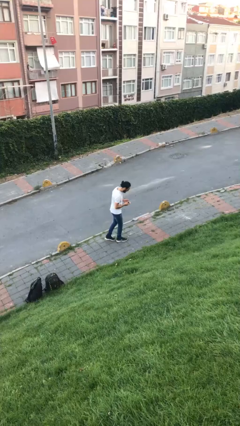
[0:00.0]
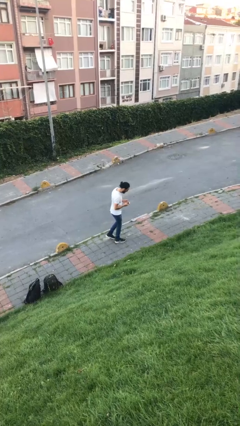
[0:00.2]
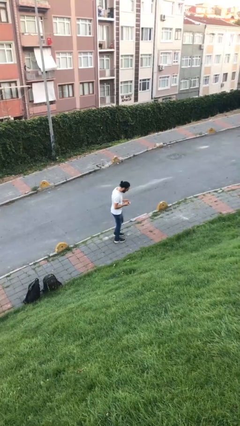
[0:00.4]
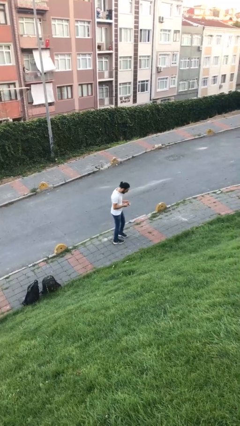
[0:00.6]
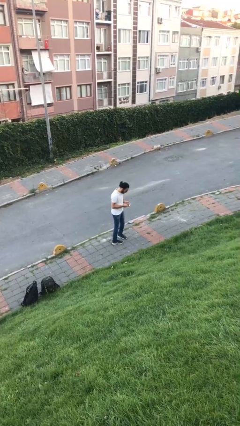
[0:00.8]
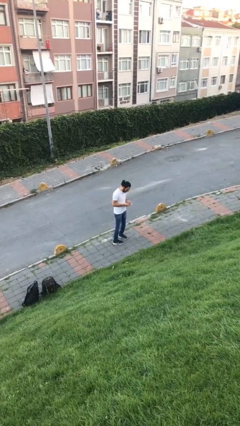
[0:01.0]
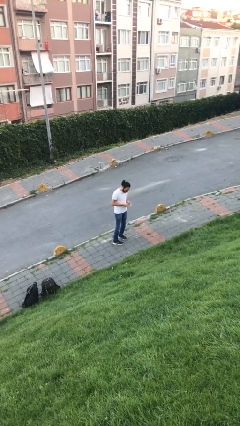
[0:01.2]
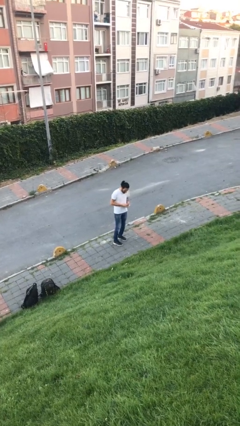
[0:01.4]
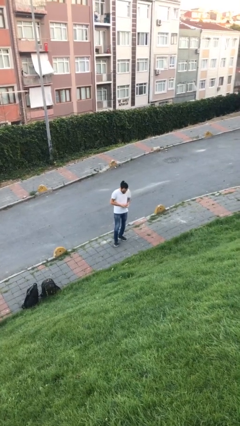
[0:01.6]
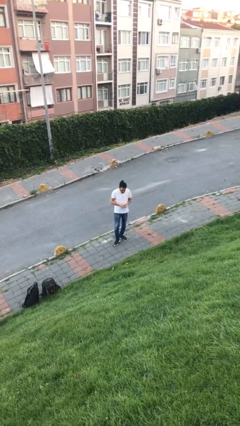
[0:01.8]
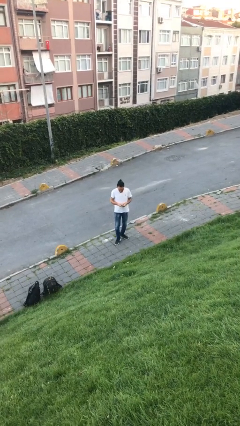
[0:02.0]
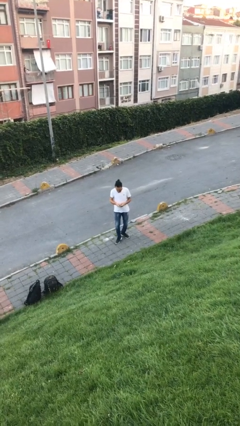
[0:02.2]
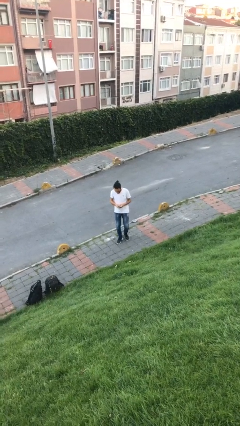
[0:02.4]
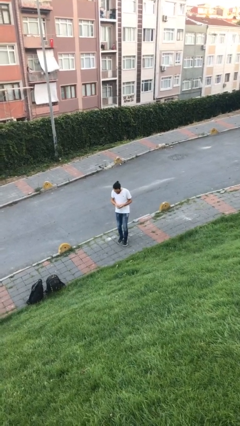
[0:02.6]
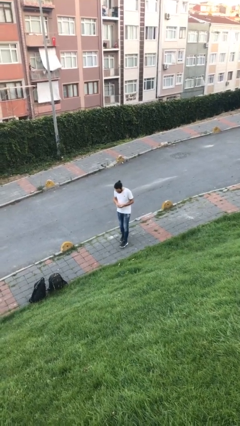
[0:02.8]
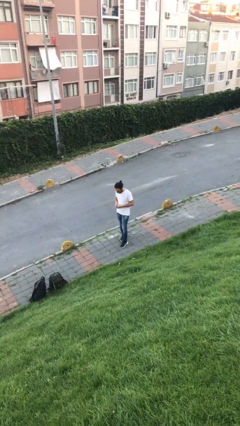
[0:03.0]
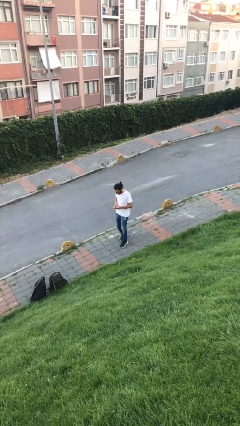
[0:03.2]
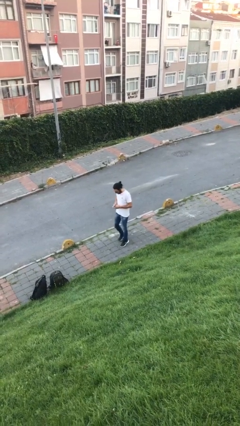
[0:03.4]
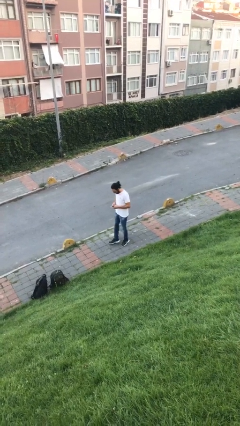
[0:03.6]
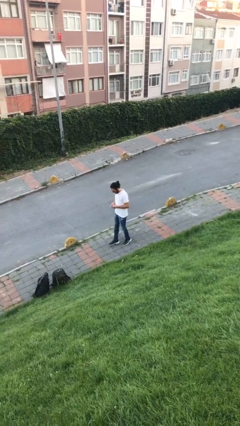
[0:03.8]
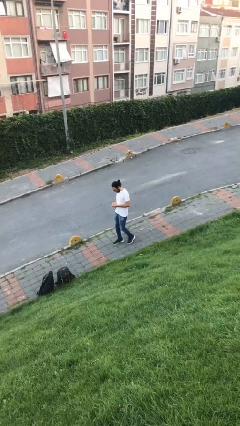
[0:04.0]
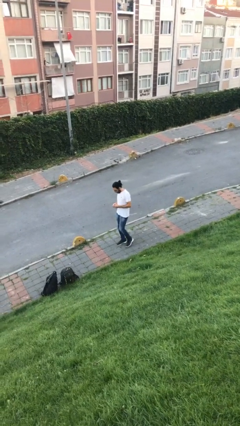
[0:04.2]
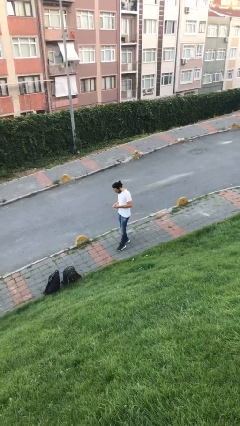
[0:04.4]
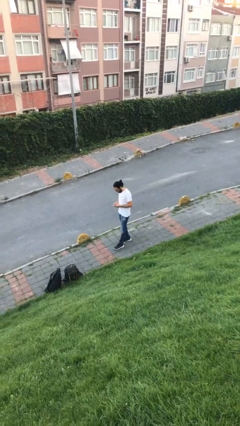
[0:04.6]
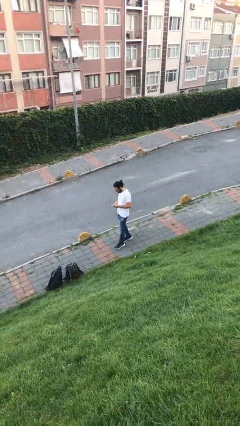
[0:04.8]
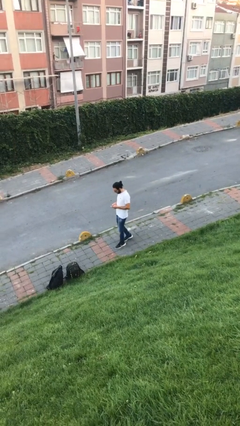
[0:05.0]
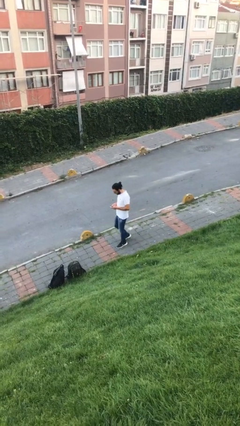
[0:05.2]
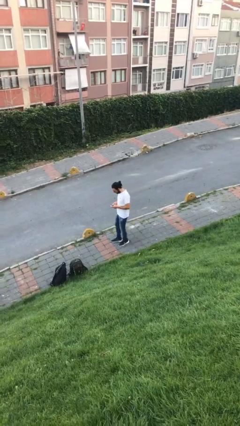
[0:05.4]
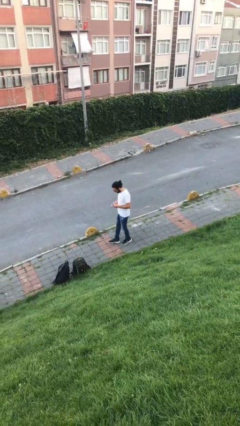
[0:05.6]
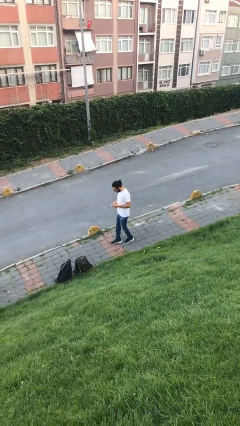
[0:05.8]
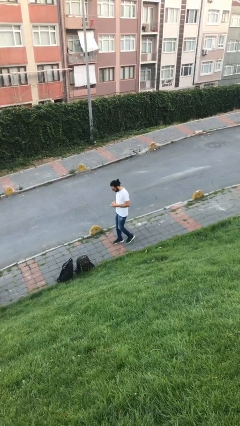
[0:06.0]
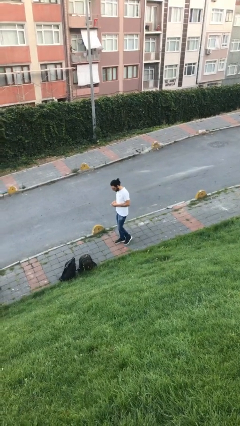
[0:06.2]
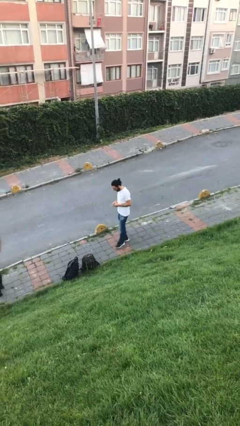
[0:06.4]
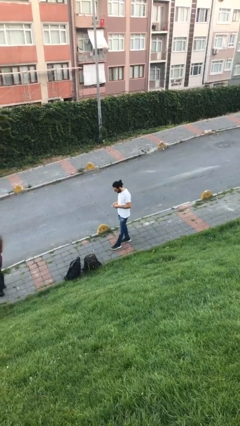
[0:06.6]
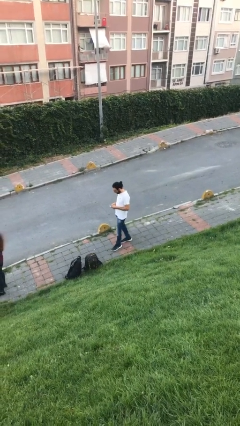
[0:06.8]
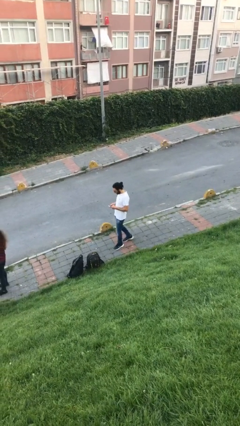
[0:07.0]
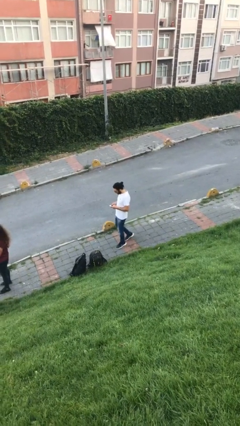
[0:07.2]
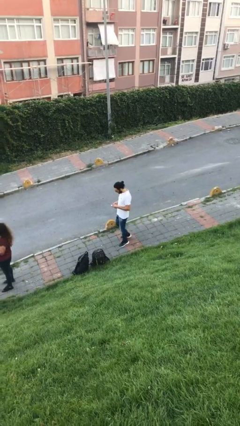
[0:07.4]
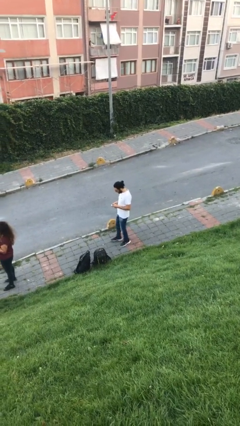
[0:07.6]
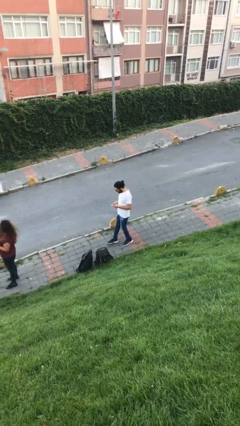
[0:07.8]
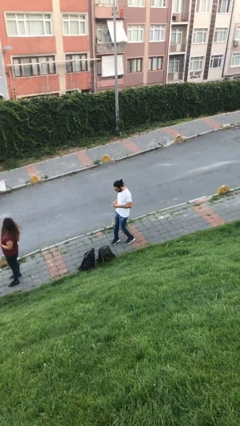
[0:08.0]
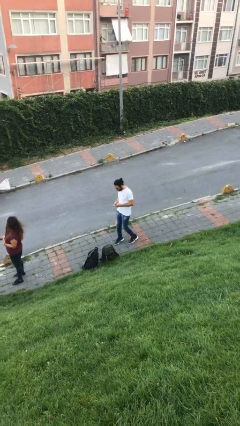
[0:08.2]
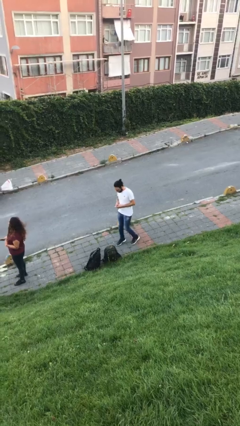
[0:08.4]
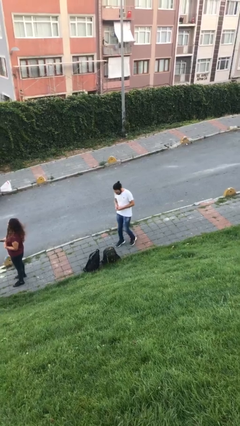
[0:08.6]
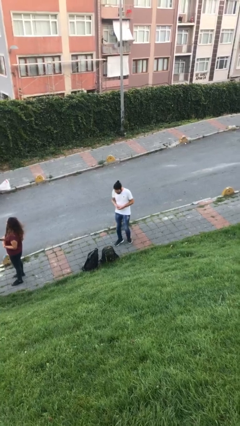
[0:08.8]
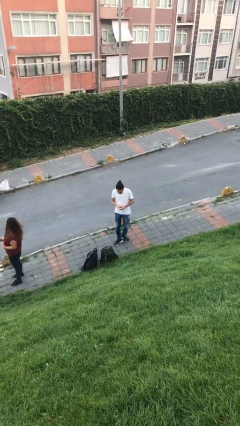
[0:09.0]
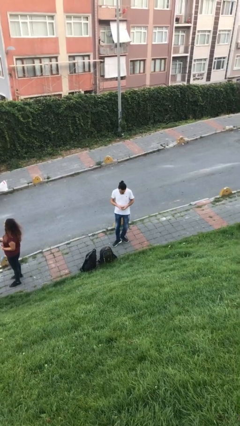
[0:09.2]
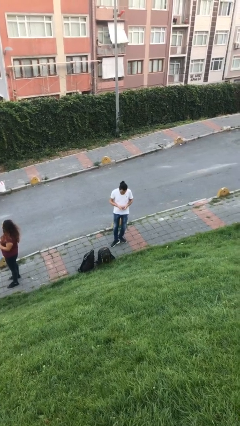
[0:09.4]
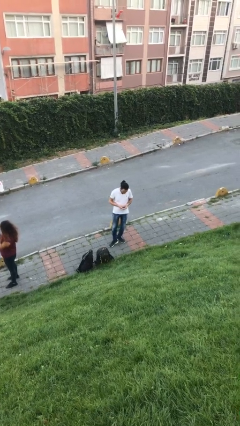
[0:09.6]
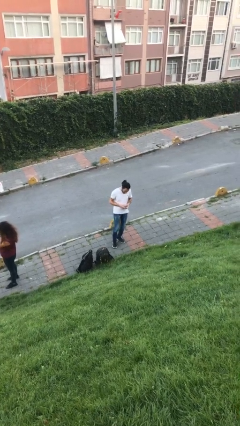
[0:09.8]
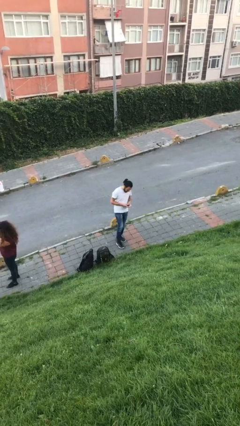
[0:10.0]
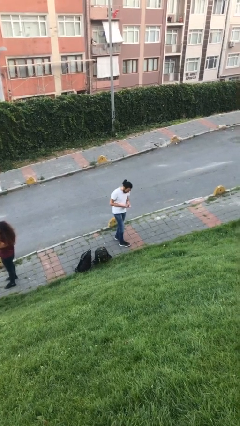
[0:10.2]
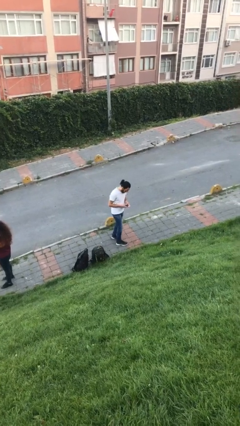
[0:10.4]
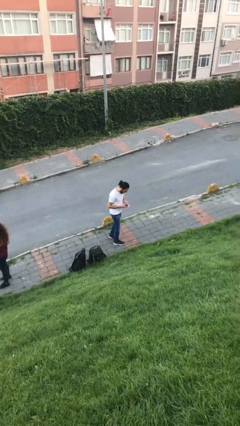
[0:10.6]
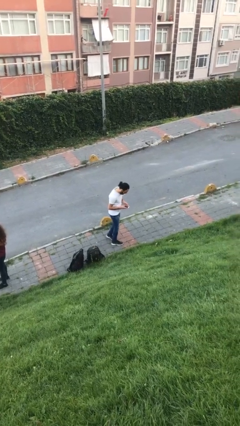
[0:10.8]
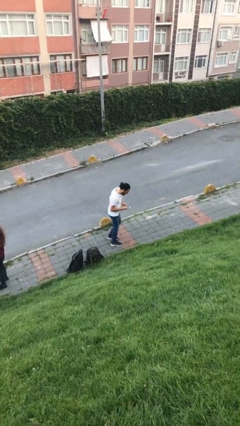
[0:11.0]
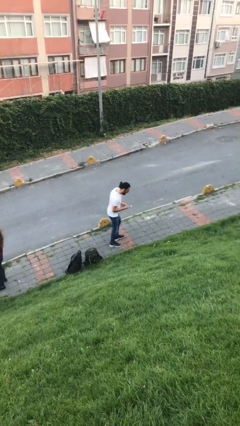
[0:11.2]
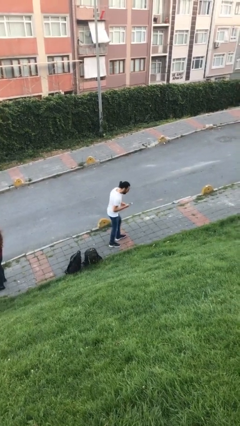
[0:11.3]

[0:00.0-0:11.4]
person texts on phone

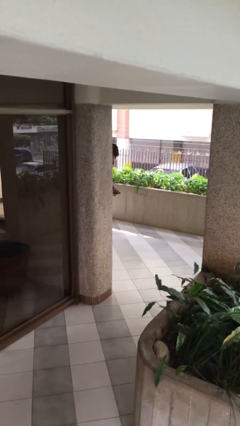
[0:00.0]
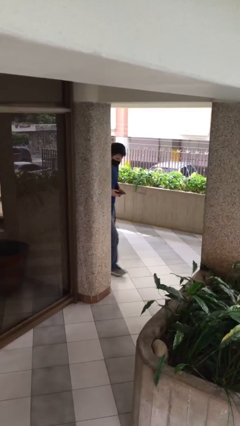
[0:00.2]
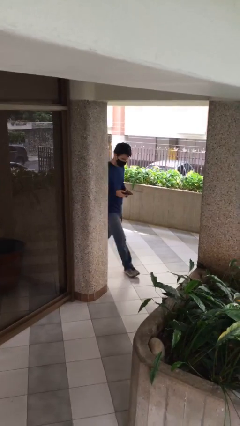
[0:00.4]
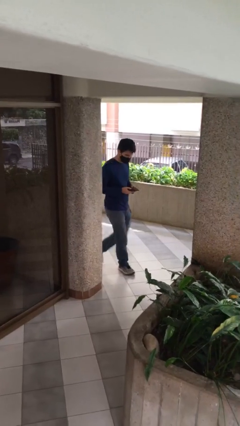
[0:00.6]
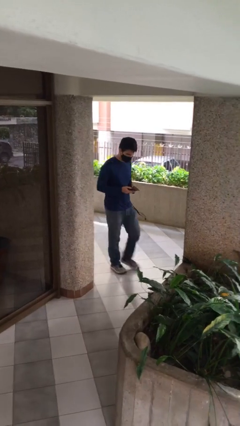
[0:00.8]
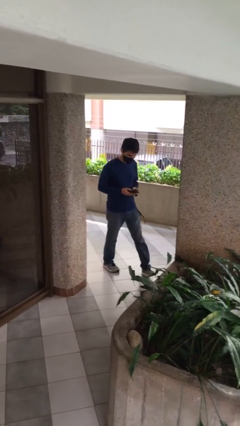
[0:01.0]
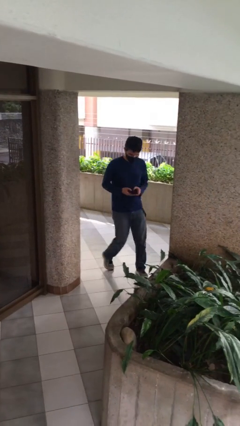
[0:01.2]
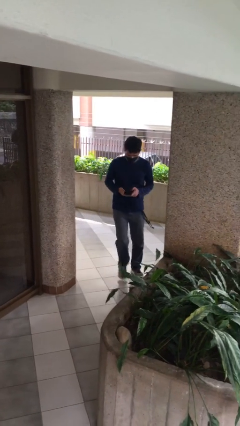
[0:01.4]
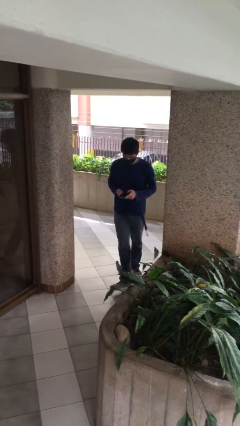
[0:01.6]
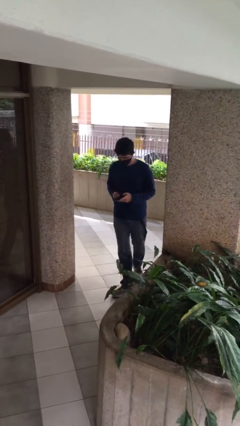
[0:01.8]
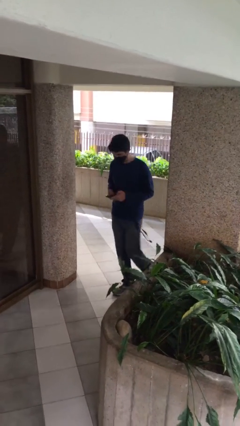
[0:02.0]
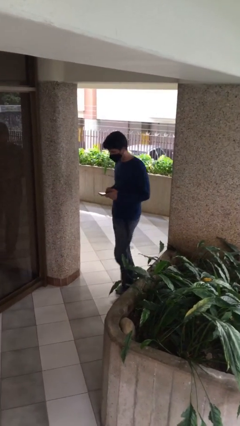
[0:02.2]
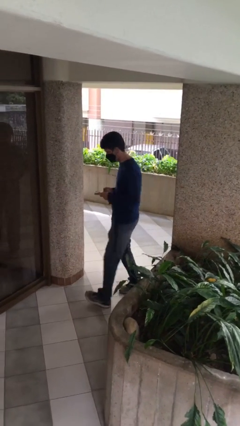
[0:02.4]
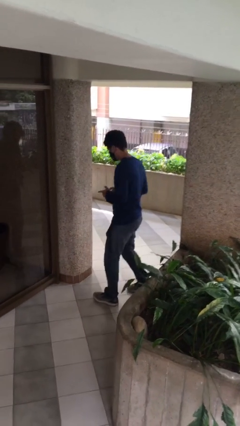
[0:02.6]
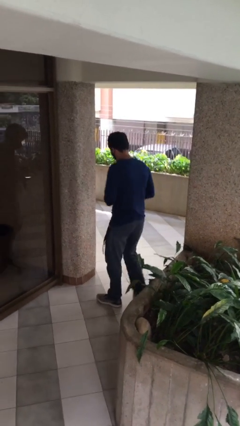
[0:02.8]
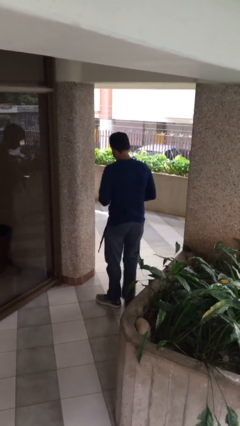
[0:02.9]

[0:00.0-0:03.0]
person enters scene through structure

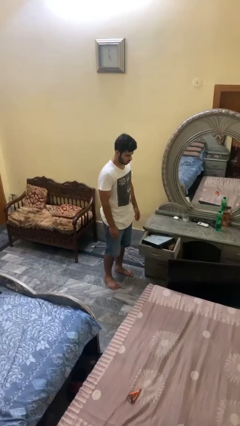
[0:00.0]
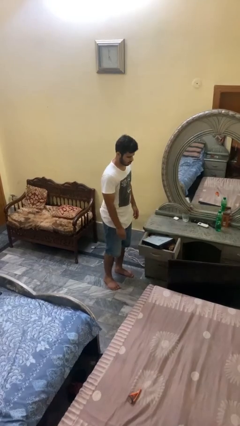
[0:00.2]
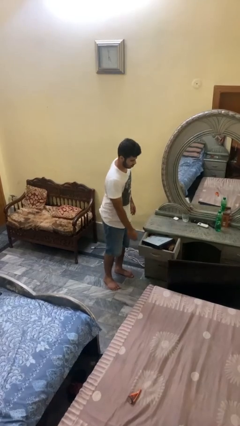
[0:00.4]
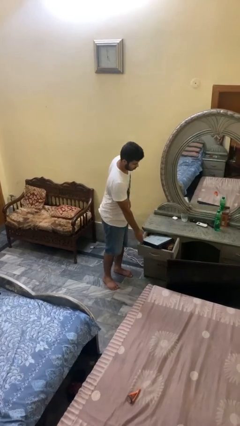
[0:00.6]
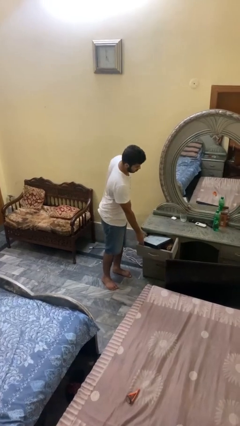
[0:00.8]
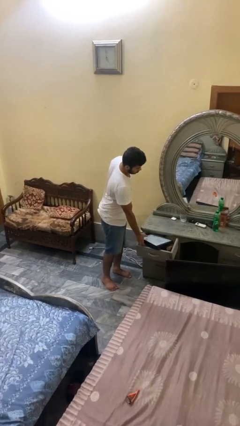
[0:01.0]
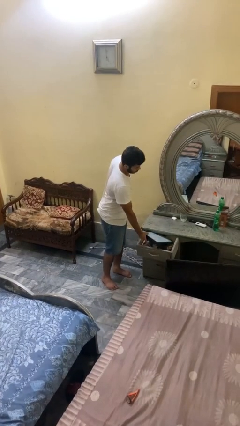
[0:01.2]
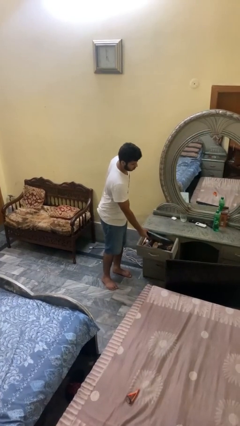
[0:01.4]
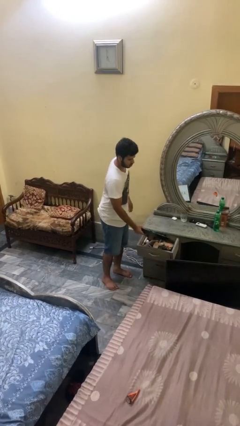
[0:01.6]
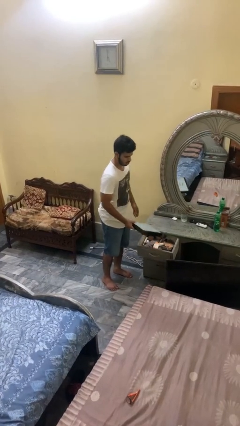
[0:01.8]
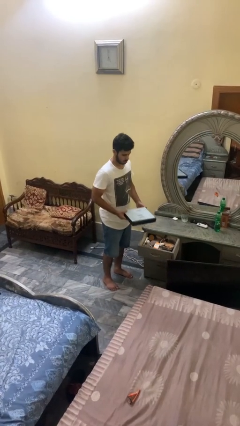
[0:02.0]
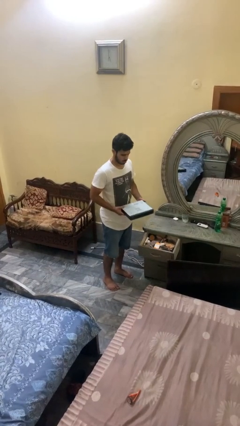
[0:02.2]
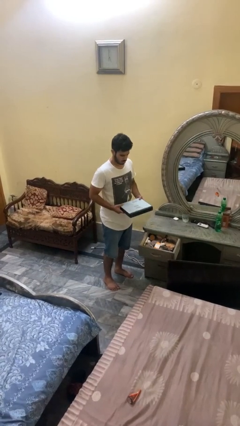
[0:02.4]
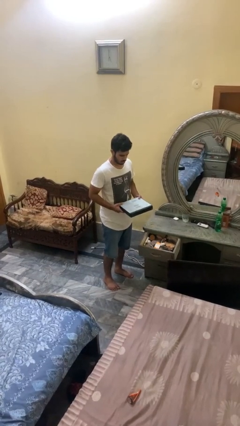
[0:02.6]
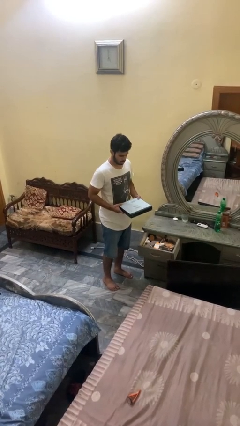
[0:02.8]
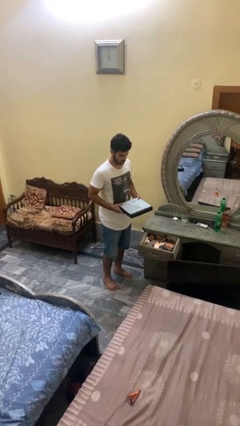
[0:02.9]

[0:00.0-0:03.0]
person picks up object from cabinet

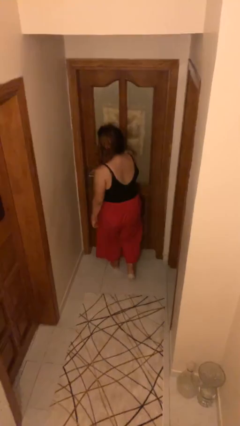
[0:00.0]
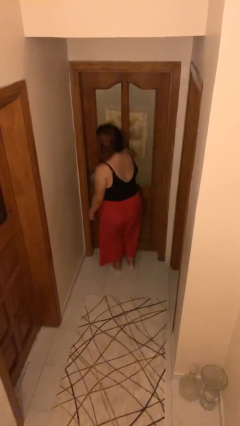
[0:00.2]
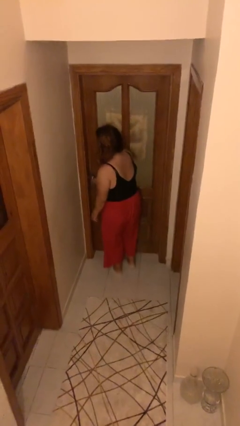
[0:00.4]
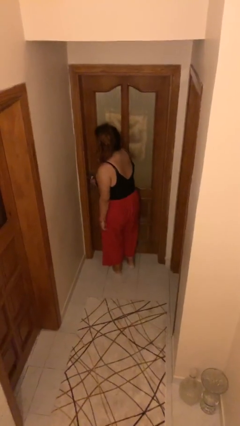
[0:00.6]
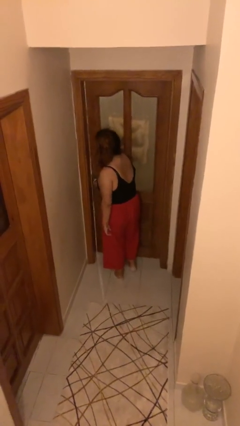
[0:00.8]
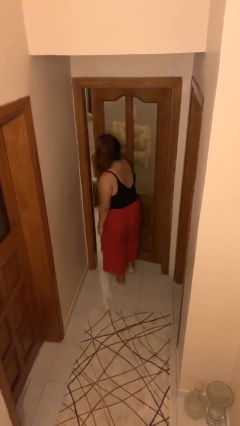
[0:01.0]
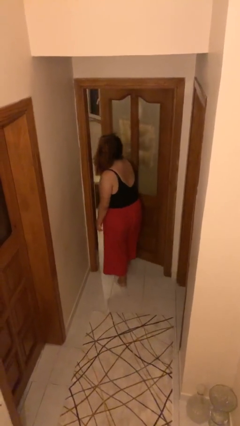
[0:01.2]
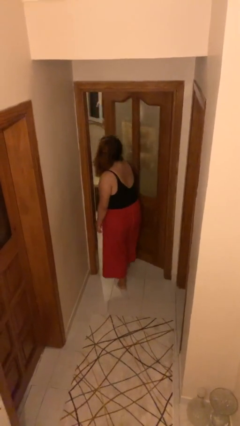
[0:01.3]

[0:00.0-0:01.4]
person opens facility door
